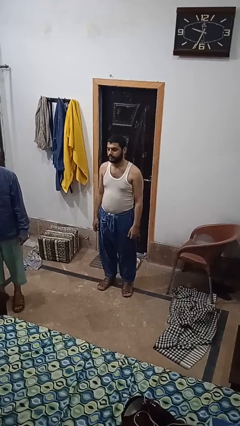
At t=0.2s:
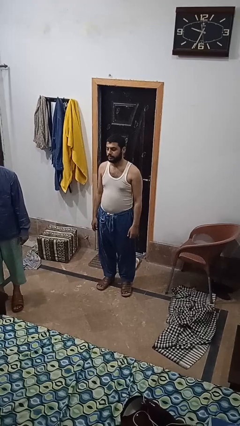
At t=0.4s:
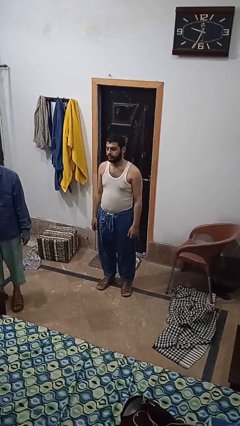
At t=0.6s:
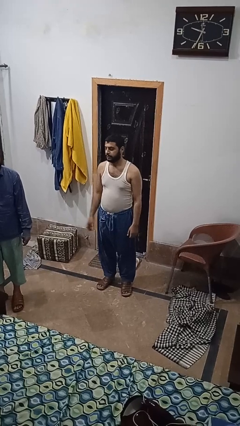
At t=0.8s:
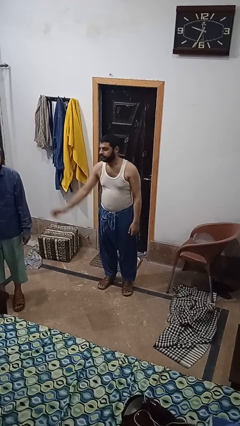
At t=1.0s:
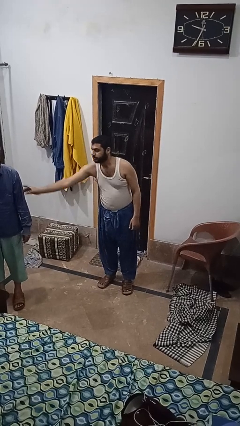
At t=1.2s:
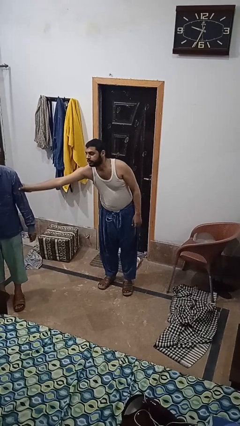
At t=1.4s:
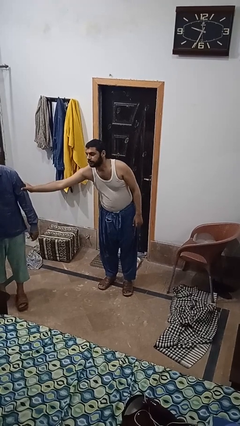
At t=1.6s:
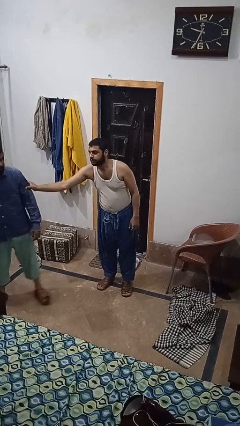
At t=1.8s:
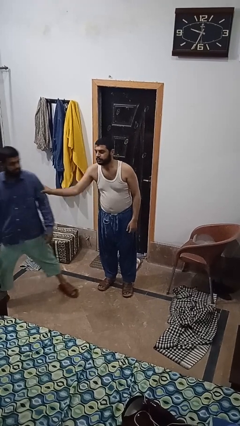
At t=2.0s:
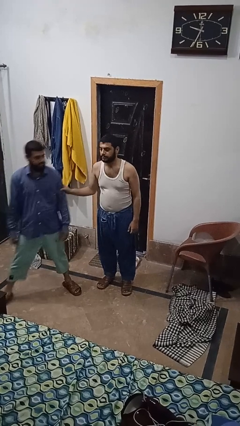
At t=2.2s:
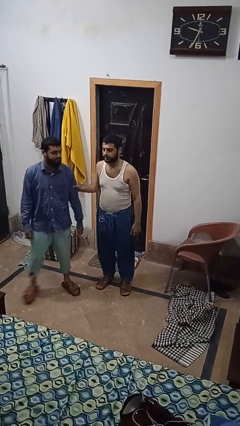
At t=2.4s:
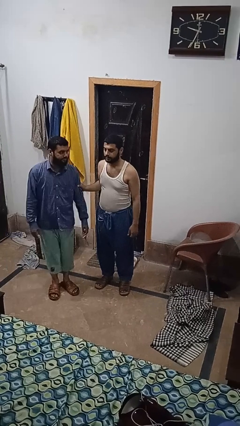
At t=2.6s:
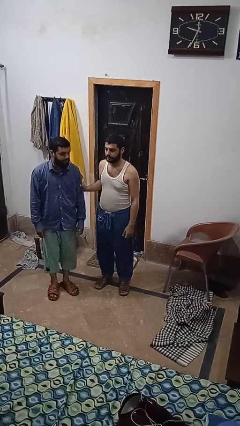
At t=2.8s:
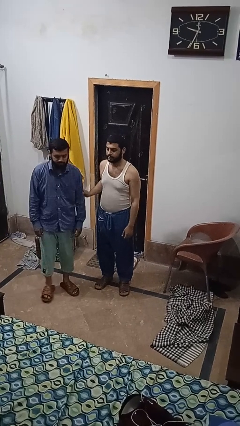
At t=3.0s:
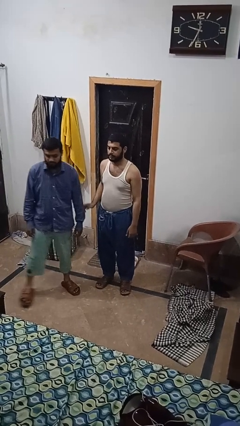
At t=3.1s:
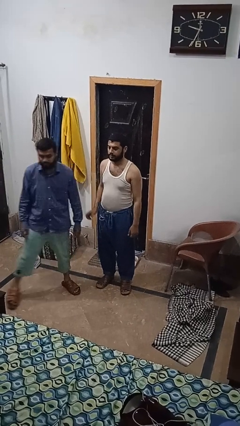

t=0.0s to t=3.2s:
person grabs person by bicep

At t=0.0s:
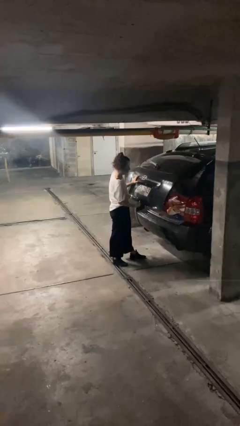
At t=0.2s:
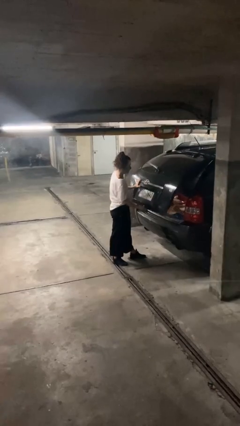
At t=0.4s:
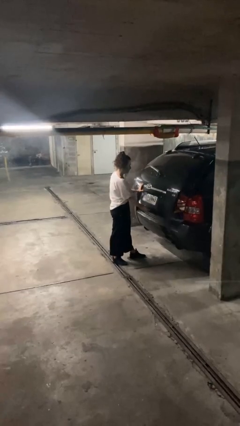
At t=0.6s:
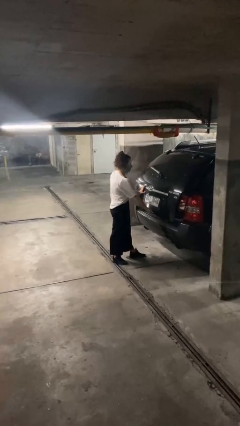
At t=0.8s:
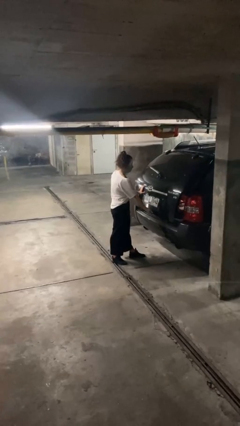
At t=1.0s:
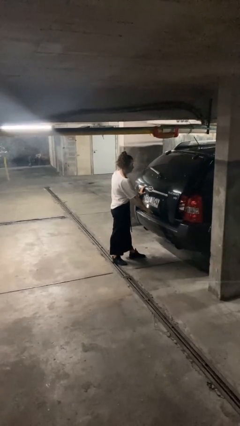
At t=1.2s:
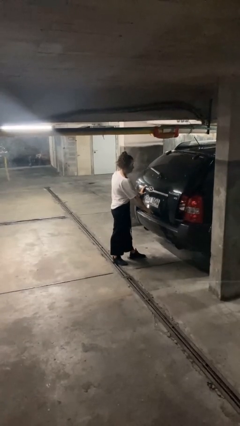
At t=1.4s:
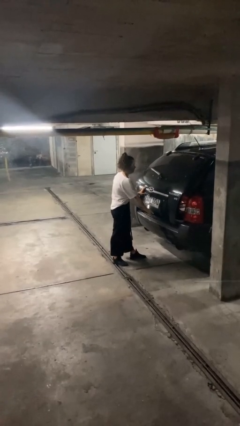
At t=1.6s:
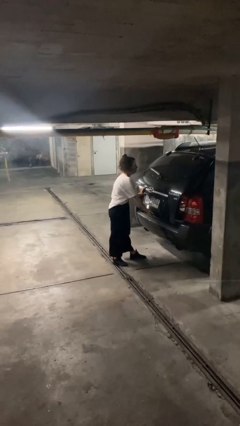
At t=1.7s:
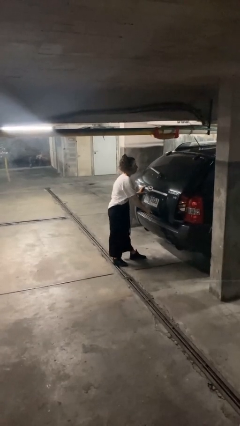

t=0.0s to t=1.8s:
person closes car trunk

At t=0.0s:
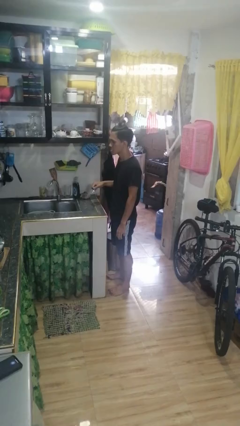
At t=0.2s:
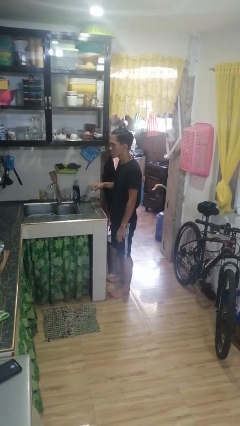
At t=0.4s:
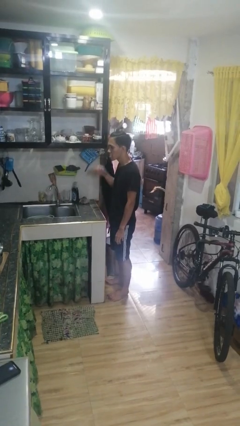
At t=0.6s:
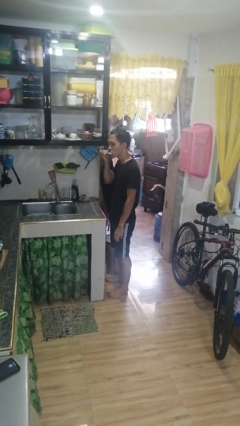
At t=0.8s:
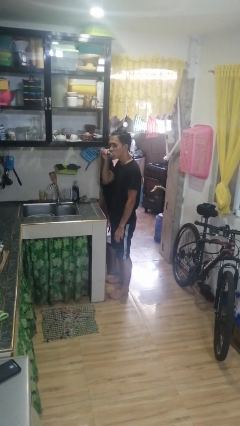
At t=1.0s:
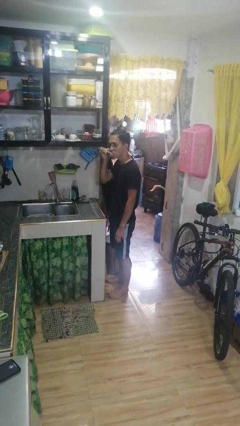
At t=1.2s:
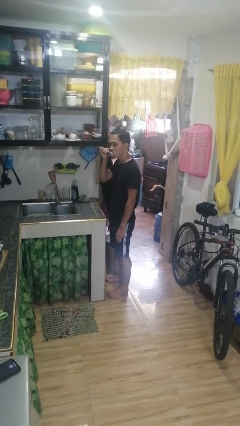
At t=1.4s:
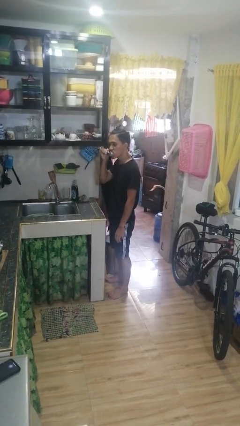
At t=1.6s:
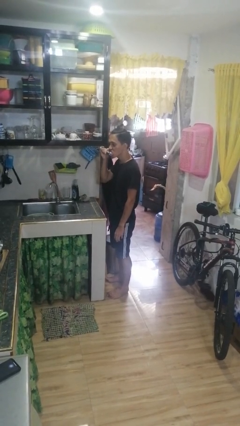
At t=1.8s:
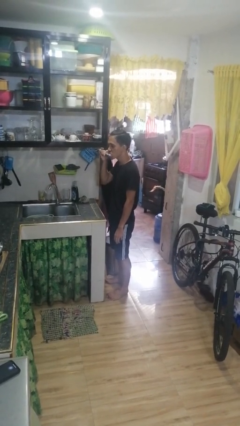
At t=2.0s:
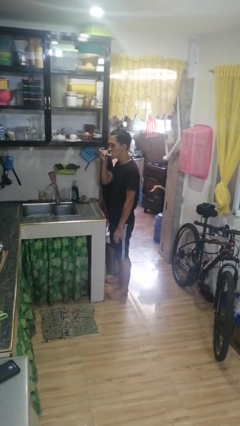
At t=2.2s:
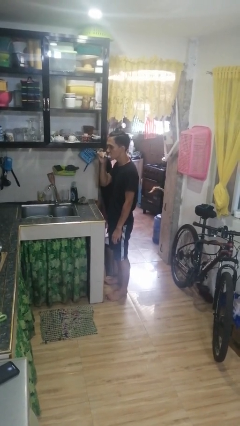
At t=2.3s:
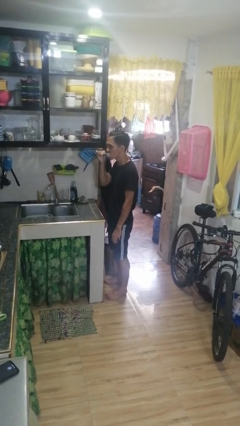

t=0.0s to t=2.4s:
person brushes teeth

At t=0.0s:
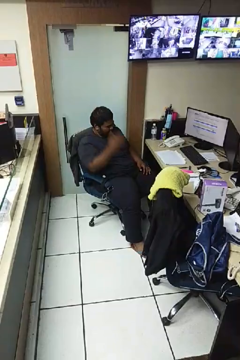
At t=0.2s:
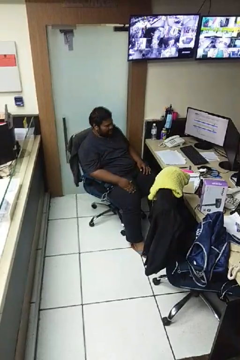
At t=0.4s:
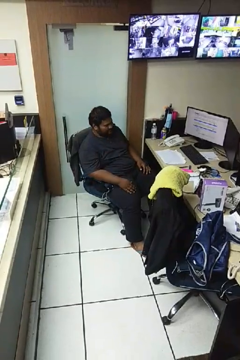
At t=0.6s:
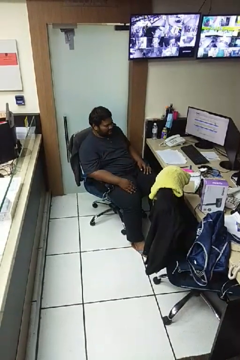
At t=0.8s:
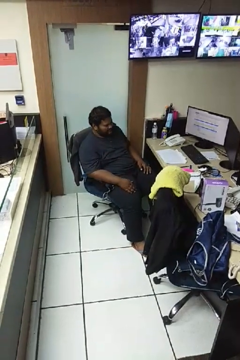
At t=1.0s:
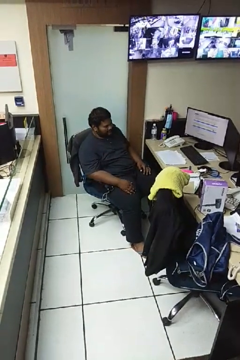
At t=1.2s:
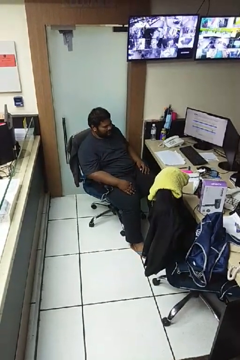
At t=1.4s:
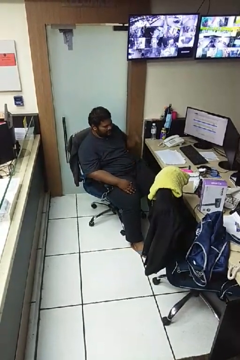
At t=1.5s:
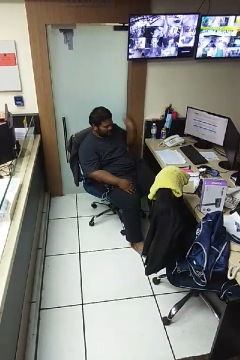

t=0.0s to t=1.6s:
person pats head

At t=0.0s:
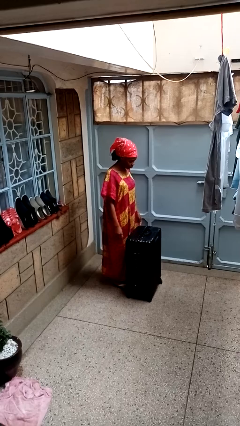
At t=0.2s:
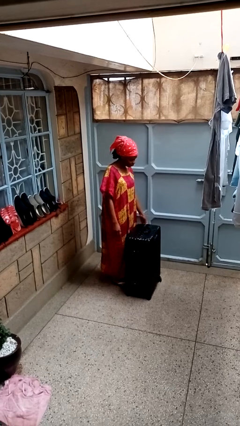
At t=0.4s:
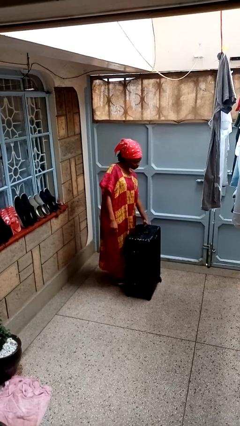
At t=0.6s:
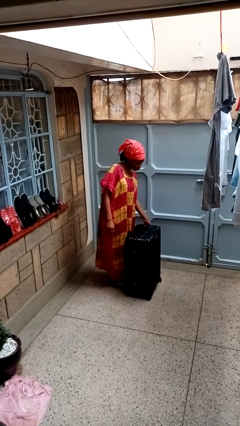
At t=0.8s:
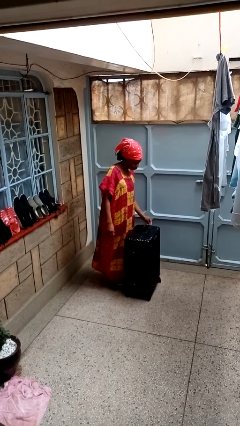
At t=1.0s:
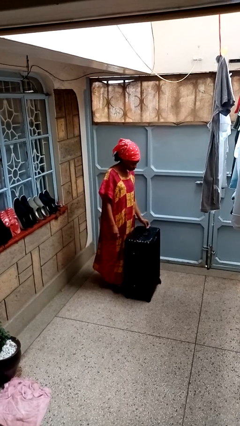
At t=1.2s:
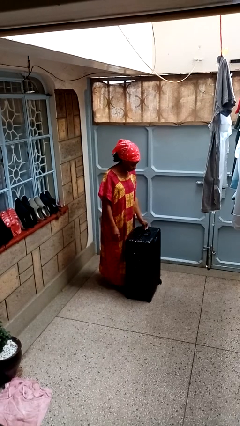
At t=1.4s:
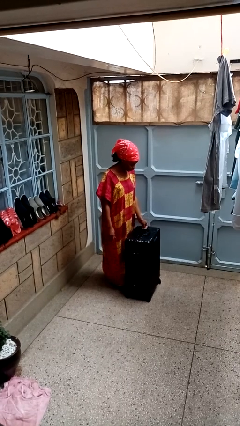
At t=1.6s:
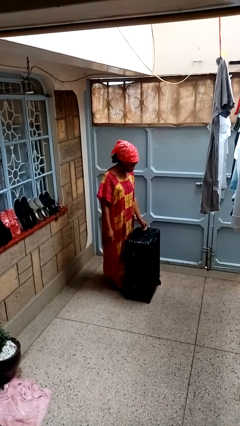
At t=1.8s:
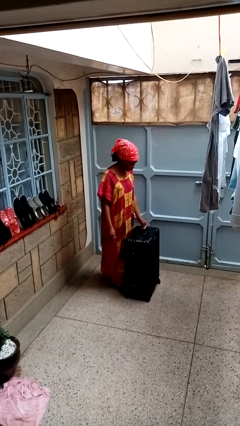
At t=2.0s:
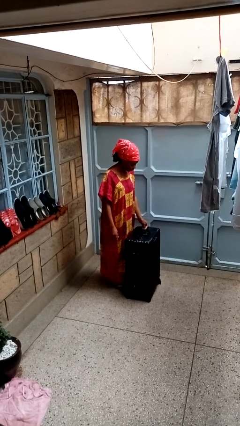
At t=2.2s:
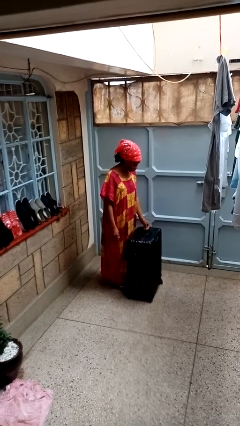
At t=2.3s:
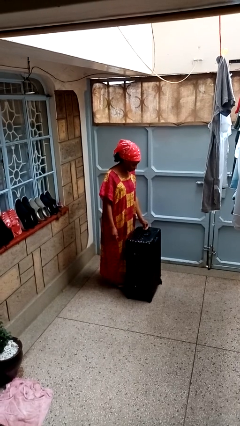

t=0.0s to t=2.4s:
person opens suitcase

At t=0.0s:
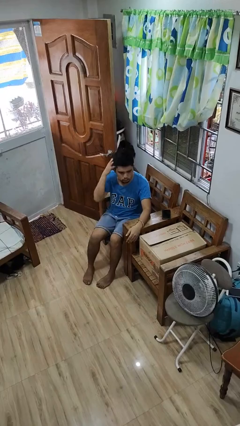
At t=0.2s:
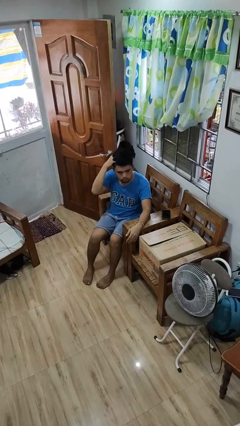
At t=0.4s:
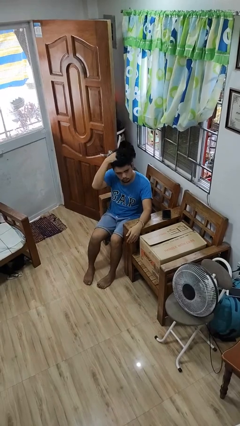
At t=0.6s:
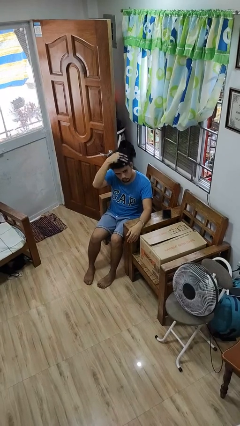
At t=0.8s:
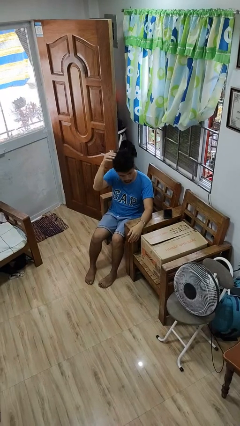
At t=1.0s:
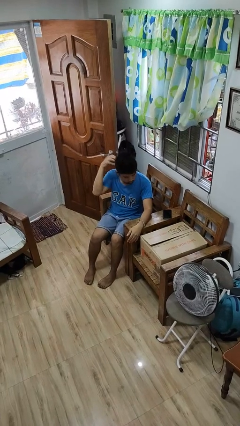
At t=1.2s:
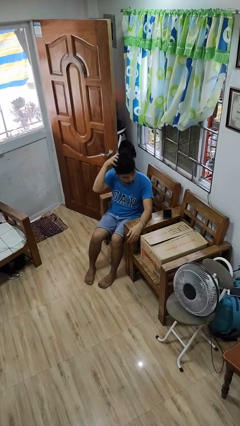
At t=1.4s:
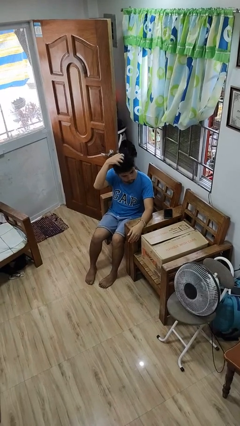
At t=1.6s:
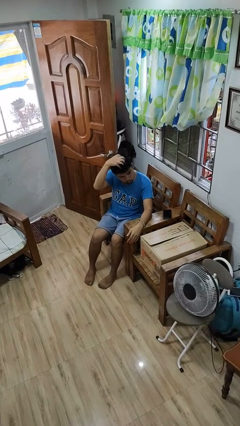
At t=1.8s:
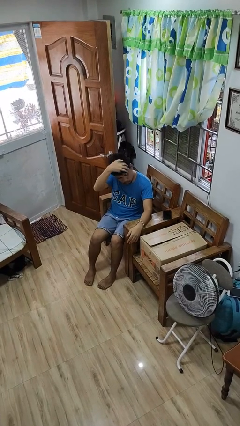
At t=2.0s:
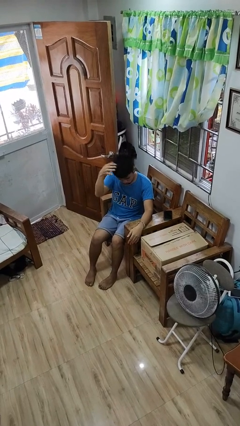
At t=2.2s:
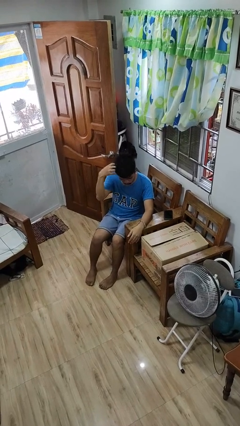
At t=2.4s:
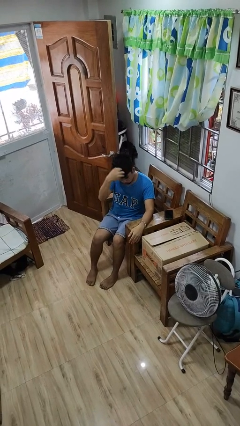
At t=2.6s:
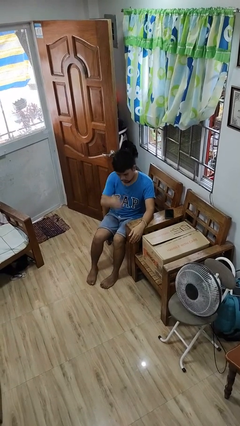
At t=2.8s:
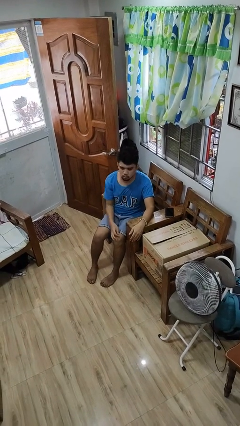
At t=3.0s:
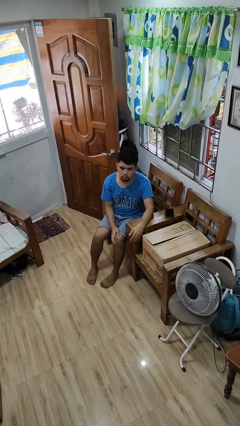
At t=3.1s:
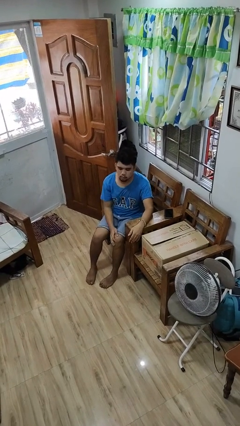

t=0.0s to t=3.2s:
person strokes hair

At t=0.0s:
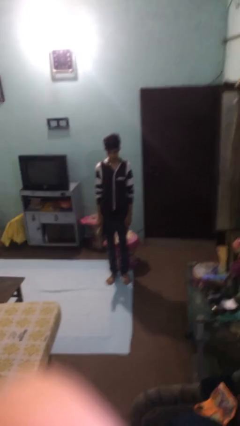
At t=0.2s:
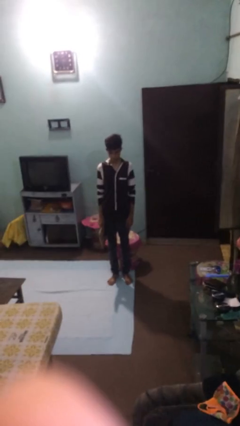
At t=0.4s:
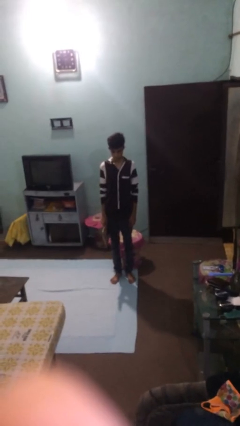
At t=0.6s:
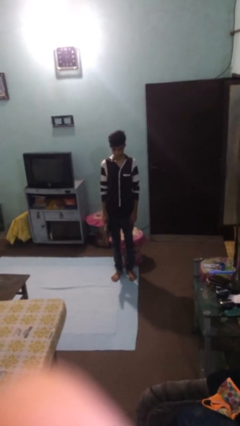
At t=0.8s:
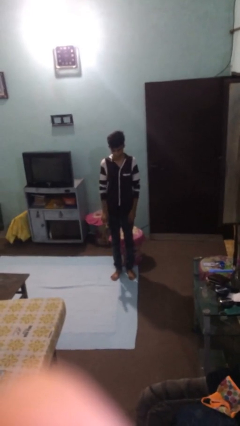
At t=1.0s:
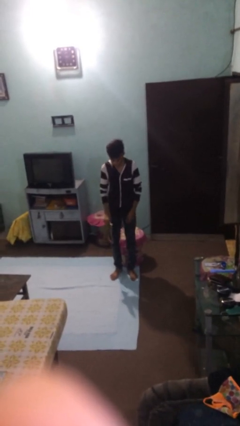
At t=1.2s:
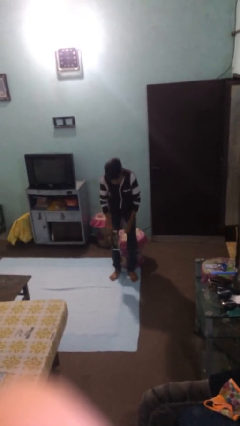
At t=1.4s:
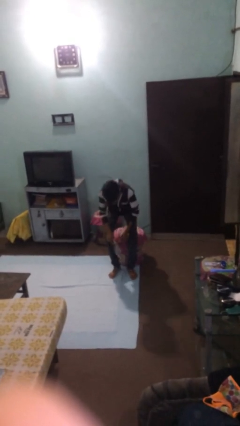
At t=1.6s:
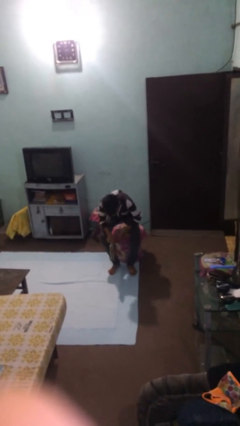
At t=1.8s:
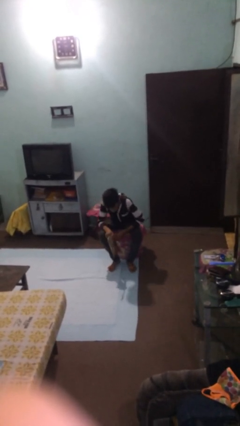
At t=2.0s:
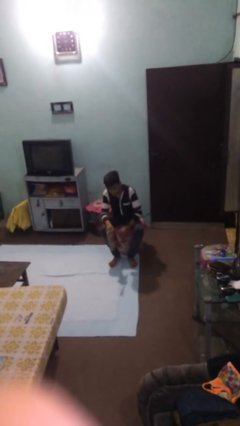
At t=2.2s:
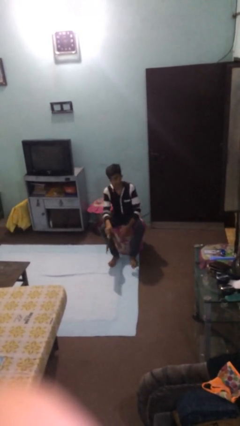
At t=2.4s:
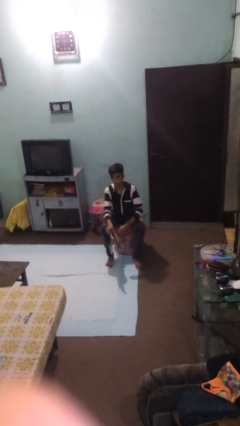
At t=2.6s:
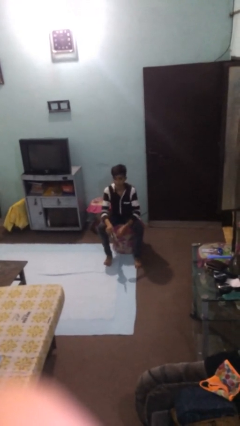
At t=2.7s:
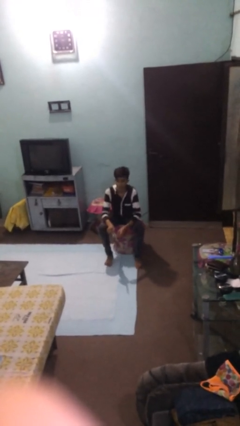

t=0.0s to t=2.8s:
person sits down
